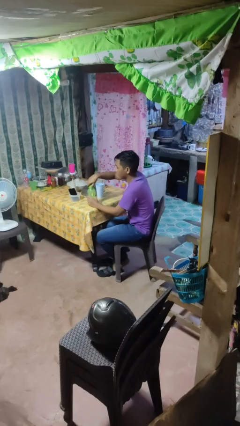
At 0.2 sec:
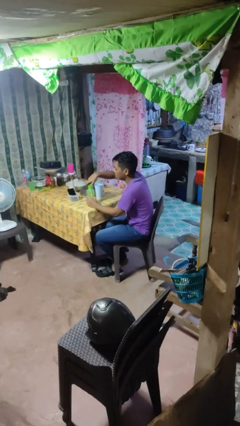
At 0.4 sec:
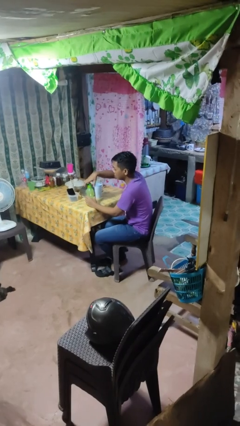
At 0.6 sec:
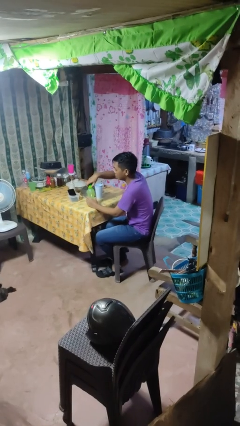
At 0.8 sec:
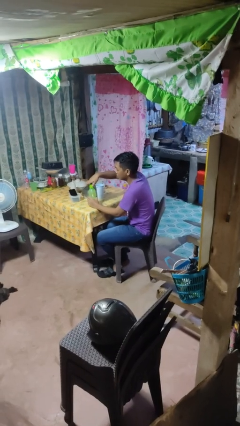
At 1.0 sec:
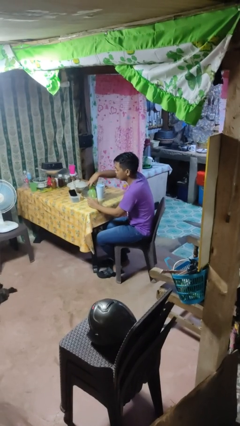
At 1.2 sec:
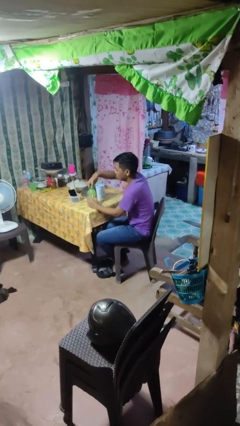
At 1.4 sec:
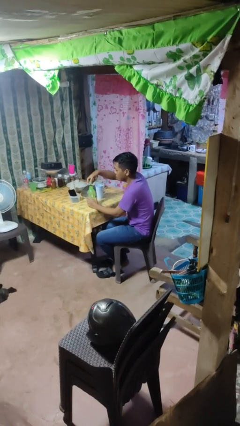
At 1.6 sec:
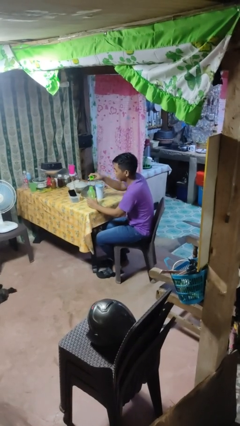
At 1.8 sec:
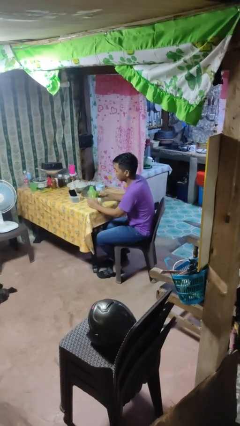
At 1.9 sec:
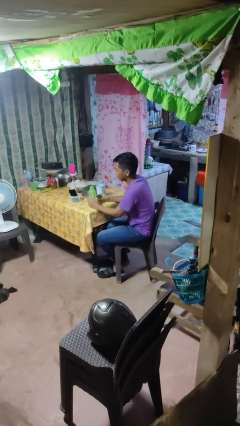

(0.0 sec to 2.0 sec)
person unscrews lid from bottle

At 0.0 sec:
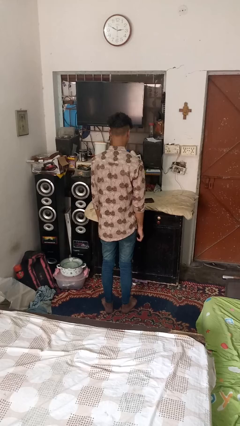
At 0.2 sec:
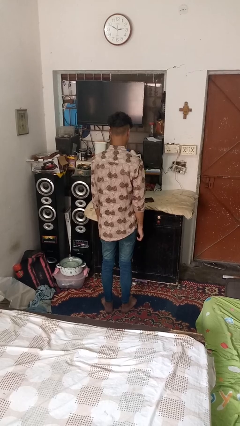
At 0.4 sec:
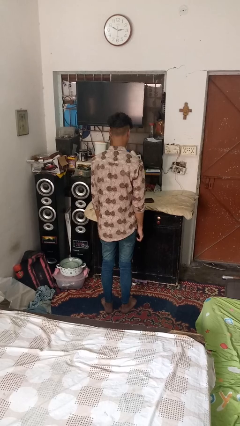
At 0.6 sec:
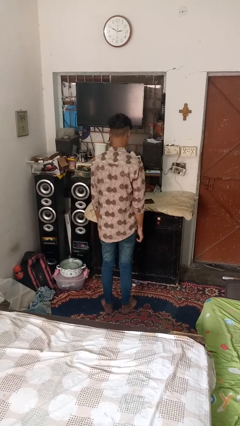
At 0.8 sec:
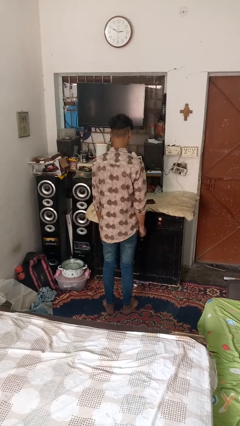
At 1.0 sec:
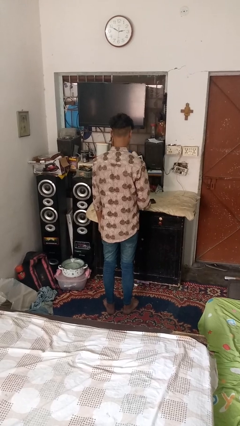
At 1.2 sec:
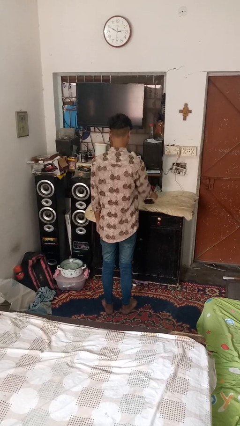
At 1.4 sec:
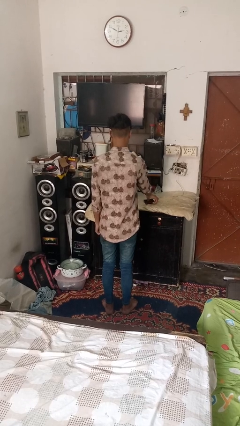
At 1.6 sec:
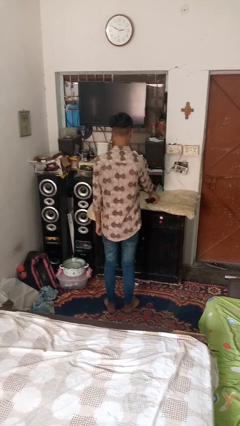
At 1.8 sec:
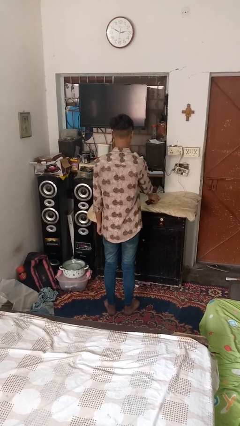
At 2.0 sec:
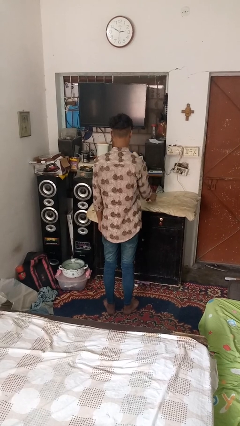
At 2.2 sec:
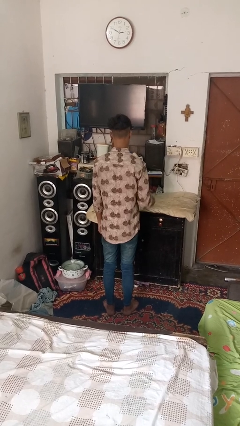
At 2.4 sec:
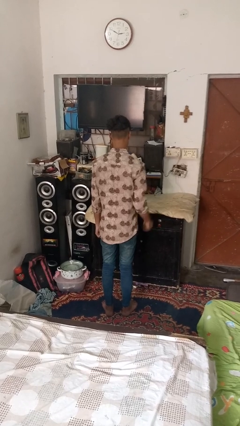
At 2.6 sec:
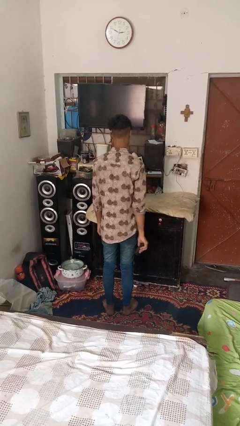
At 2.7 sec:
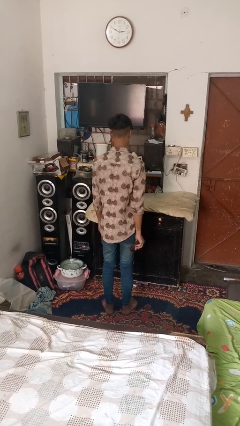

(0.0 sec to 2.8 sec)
person picks up object from table

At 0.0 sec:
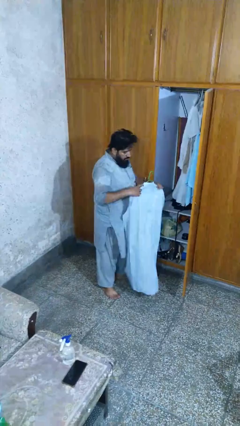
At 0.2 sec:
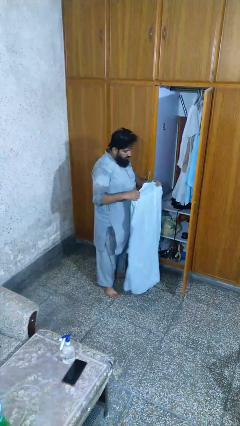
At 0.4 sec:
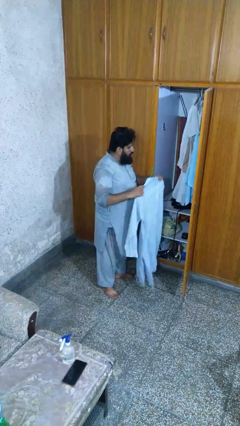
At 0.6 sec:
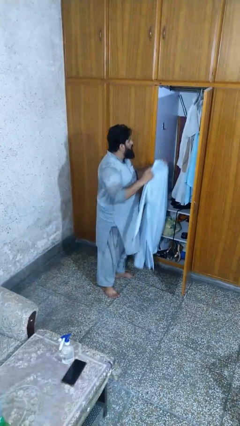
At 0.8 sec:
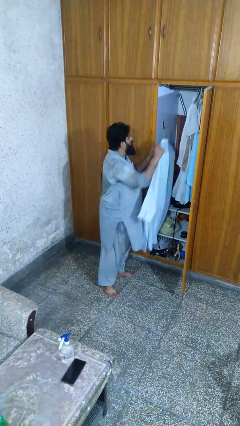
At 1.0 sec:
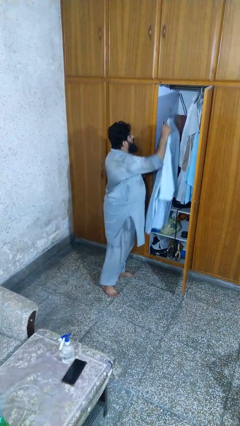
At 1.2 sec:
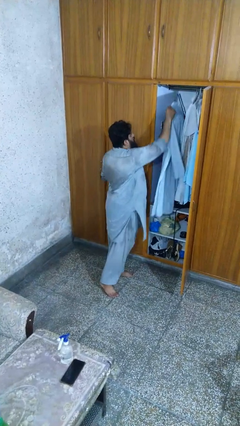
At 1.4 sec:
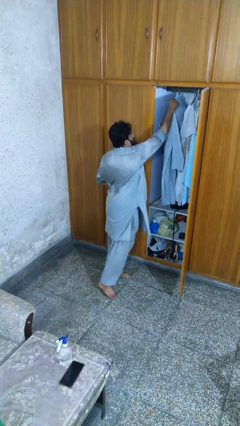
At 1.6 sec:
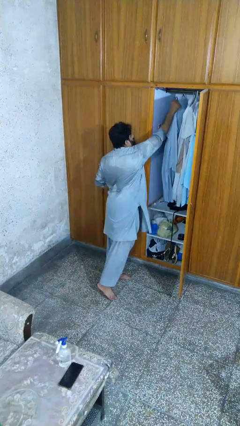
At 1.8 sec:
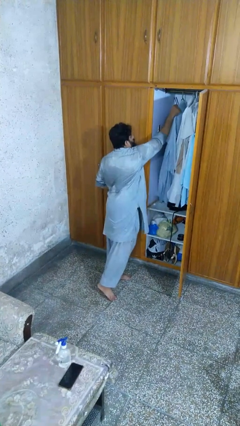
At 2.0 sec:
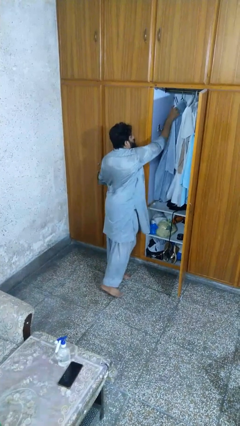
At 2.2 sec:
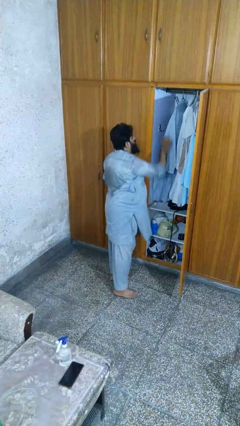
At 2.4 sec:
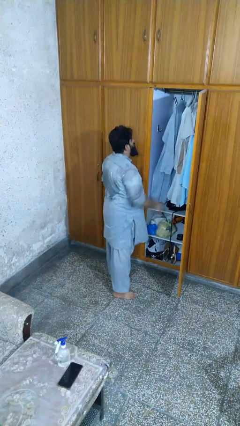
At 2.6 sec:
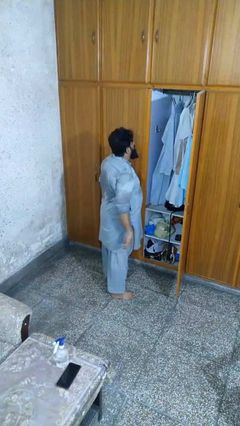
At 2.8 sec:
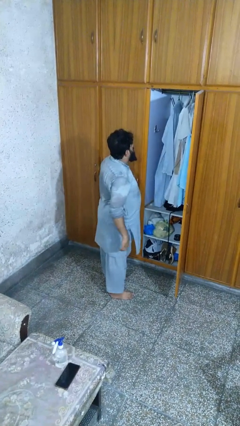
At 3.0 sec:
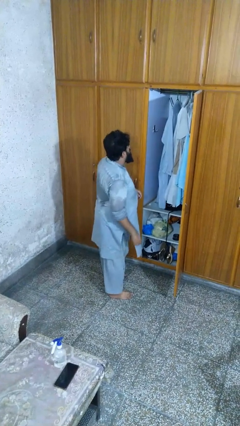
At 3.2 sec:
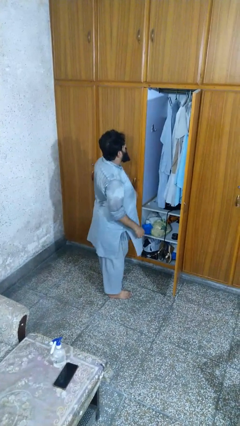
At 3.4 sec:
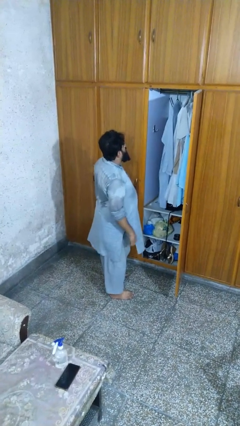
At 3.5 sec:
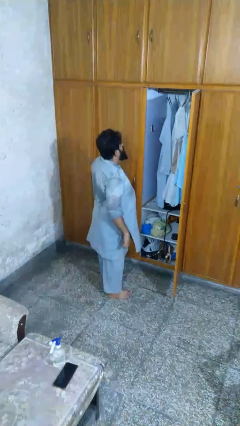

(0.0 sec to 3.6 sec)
person puts clothes into closet

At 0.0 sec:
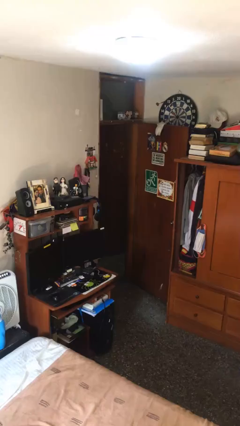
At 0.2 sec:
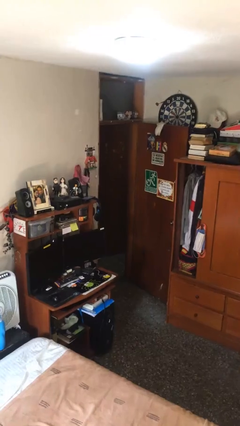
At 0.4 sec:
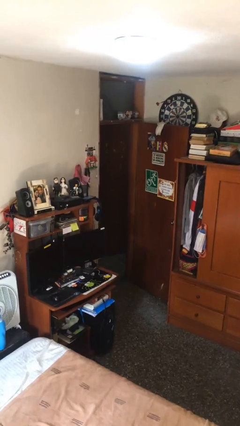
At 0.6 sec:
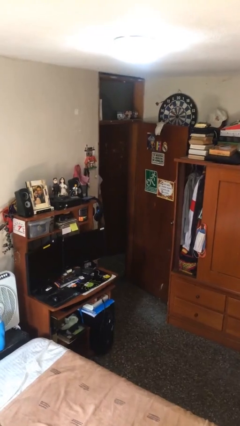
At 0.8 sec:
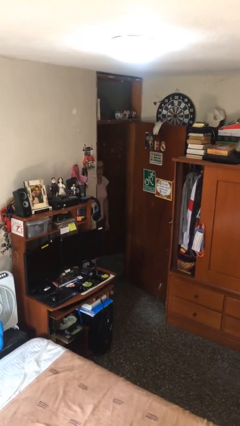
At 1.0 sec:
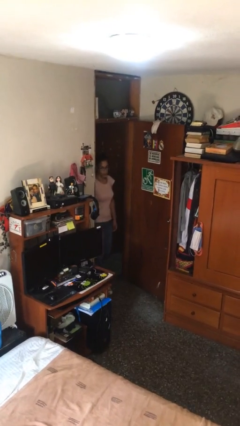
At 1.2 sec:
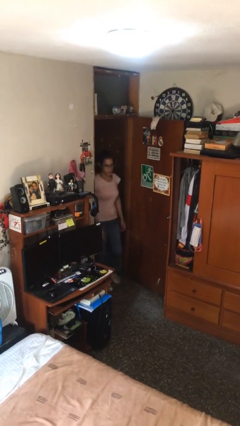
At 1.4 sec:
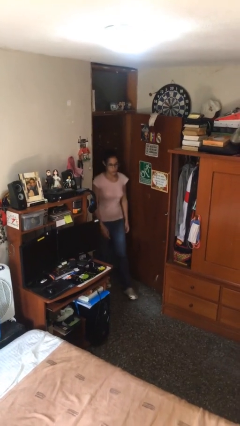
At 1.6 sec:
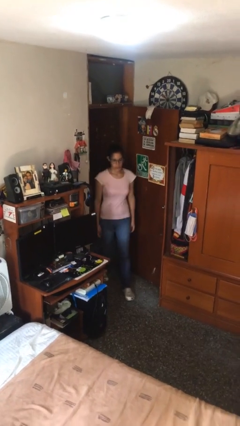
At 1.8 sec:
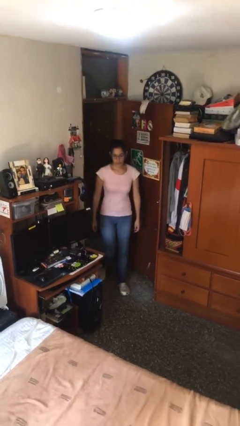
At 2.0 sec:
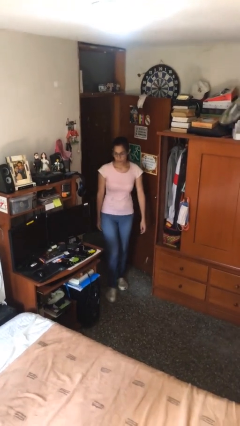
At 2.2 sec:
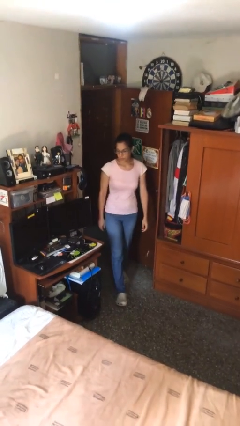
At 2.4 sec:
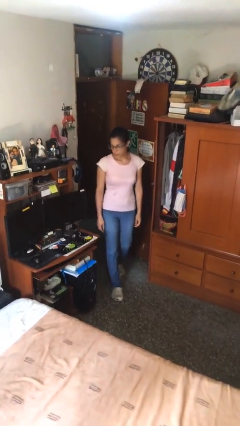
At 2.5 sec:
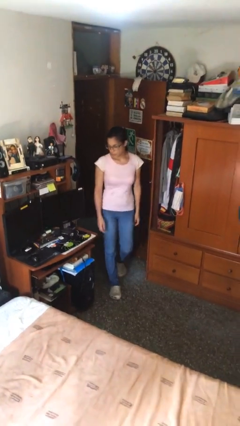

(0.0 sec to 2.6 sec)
person enters scene through structure

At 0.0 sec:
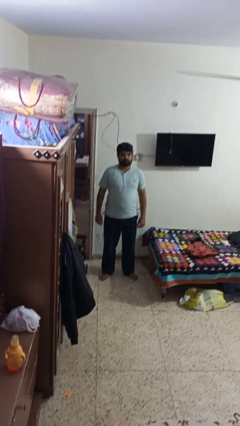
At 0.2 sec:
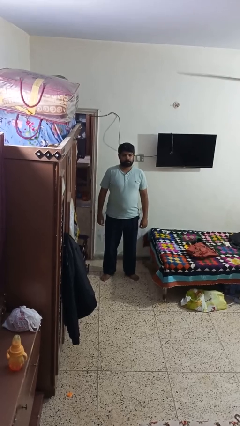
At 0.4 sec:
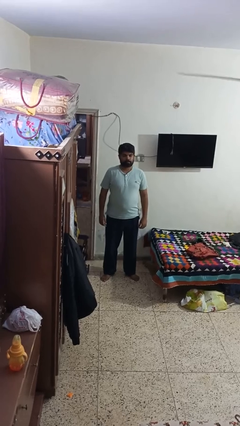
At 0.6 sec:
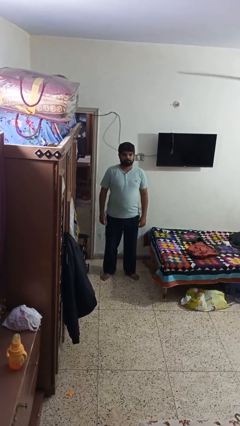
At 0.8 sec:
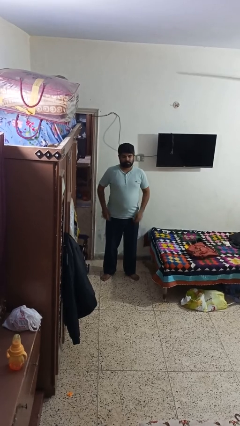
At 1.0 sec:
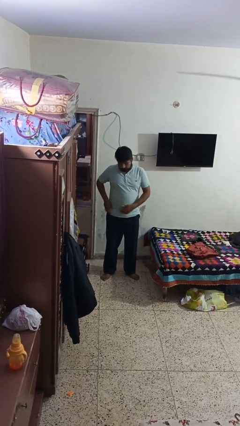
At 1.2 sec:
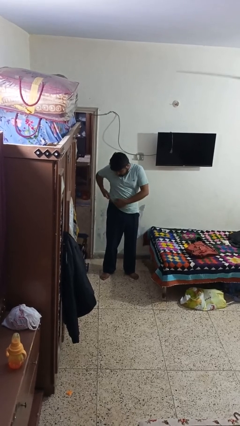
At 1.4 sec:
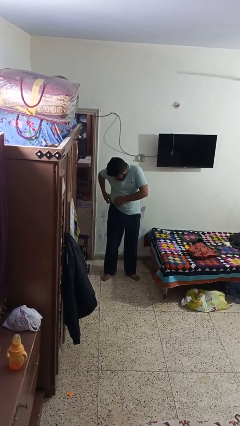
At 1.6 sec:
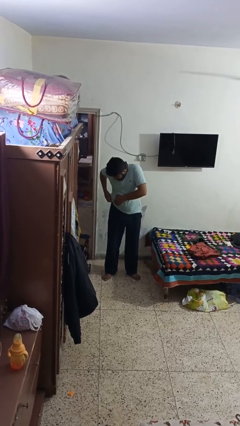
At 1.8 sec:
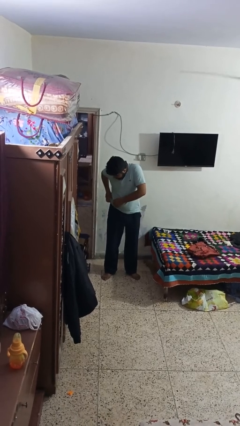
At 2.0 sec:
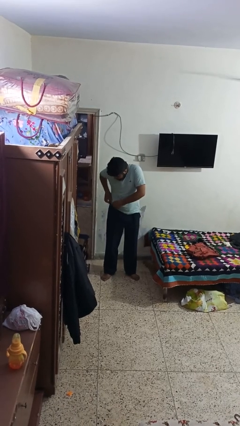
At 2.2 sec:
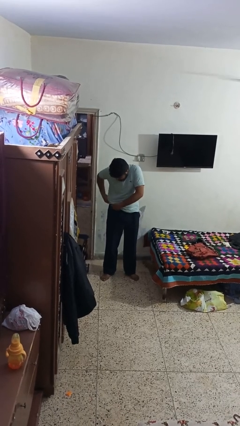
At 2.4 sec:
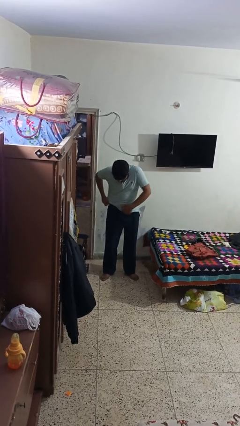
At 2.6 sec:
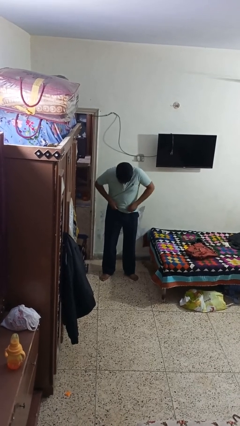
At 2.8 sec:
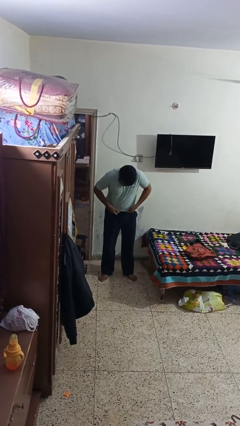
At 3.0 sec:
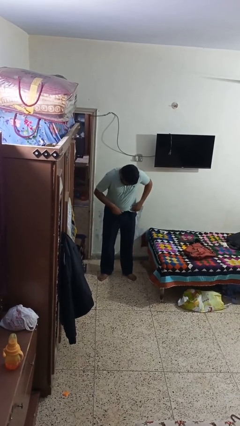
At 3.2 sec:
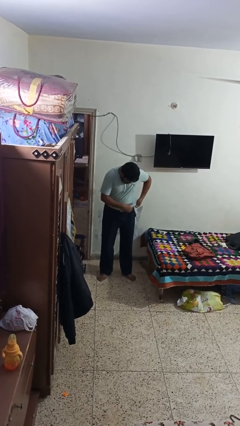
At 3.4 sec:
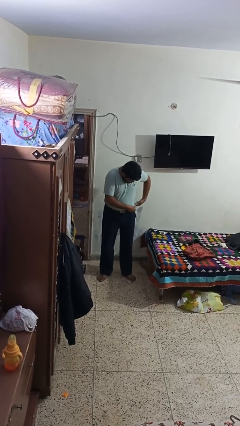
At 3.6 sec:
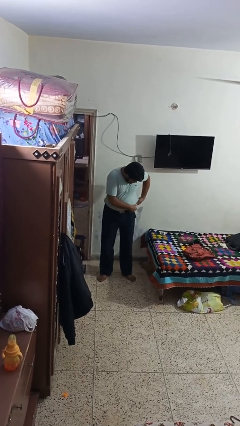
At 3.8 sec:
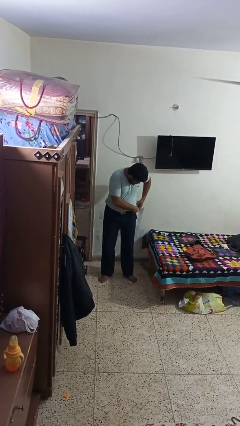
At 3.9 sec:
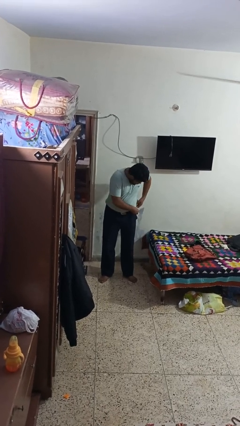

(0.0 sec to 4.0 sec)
person tucks in shirt

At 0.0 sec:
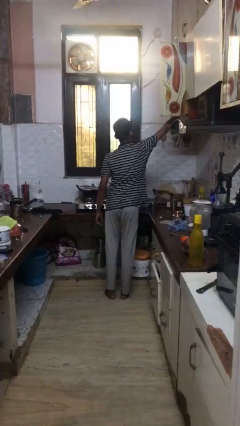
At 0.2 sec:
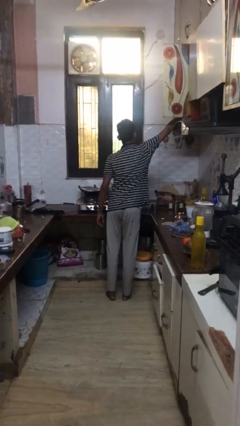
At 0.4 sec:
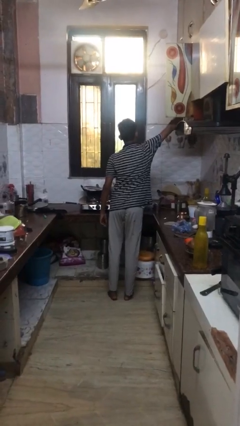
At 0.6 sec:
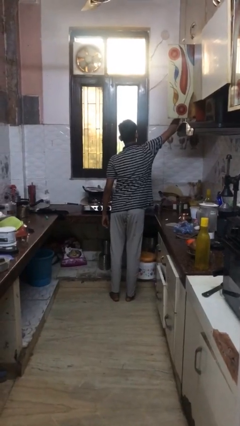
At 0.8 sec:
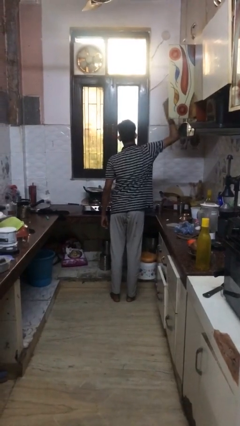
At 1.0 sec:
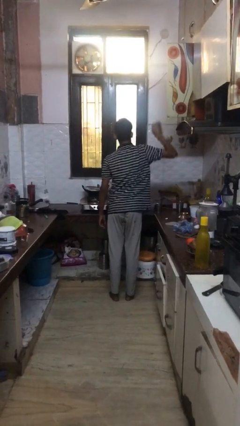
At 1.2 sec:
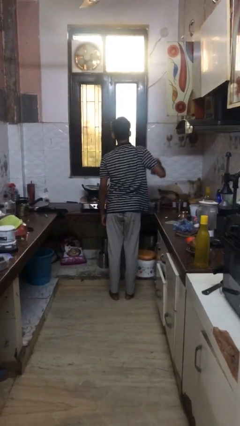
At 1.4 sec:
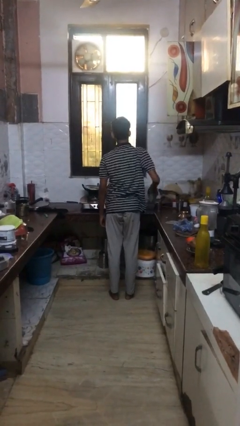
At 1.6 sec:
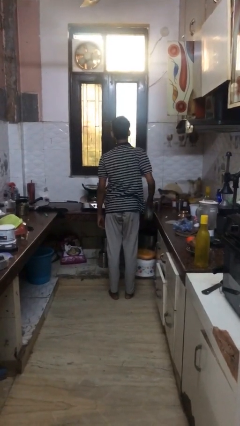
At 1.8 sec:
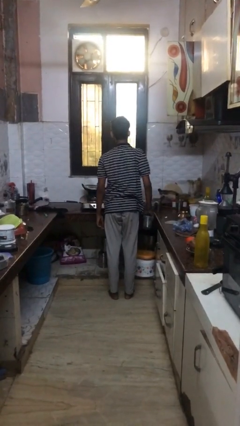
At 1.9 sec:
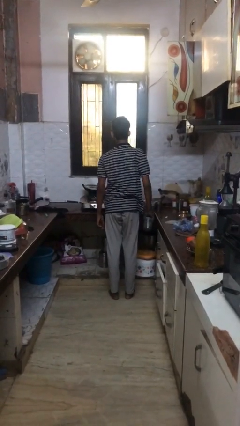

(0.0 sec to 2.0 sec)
person puts object in cabinet
